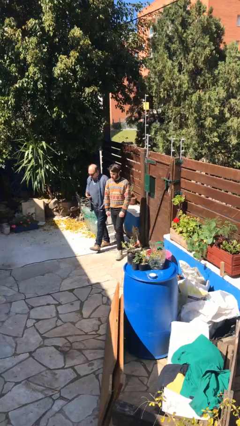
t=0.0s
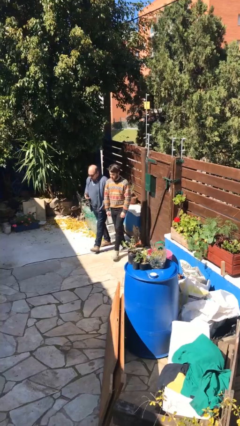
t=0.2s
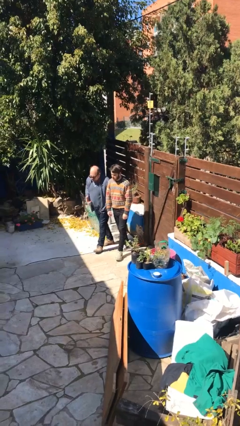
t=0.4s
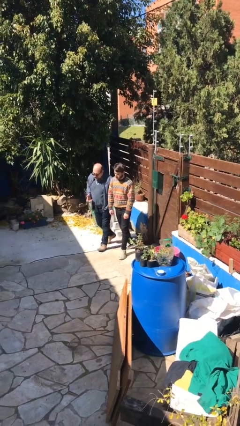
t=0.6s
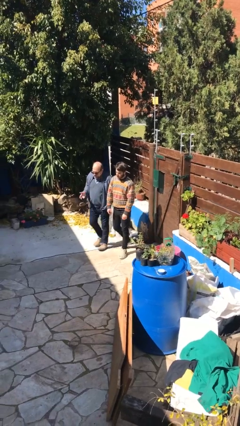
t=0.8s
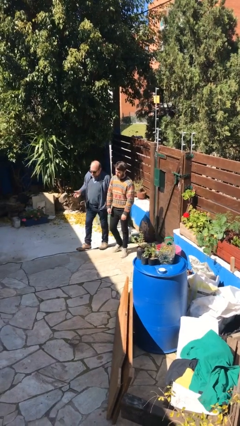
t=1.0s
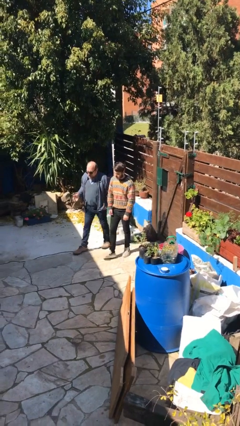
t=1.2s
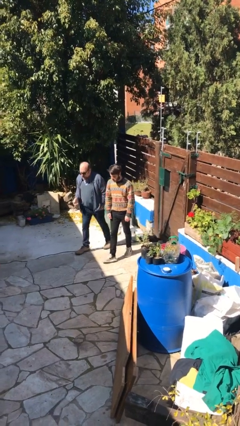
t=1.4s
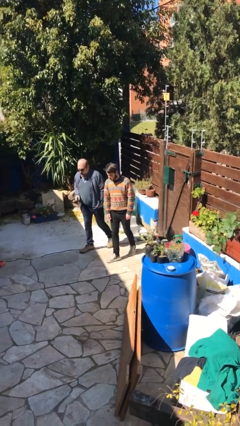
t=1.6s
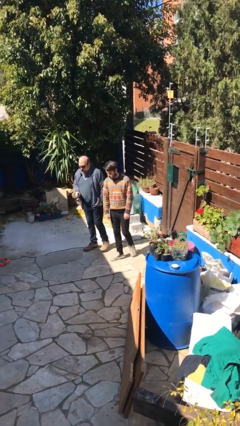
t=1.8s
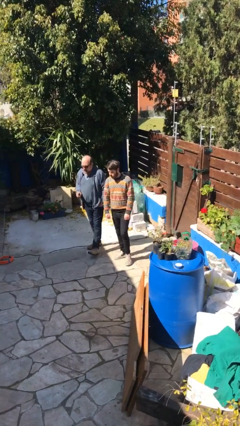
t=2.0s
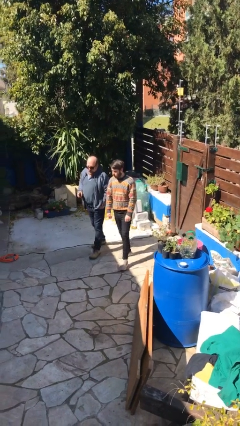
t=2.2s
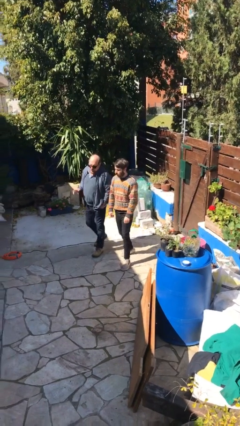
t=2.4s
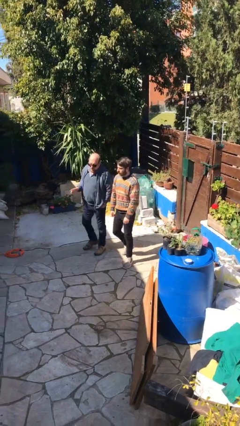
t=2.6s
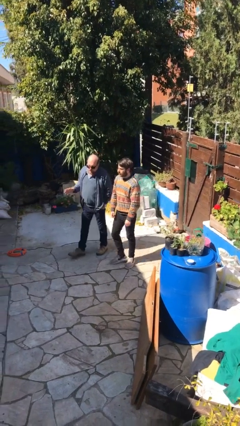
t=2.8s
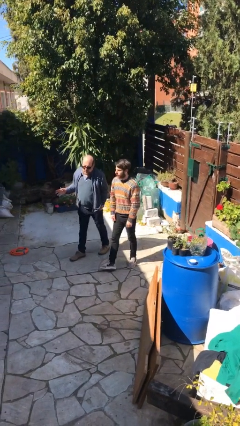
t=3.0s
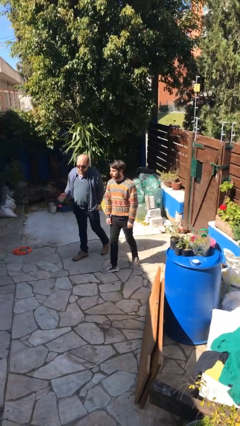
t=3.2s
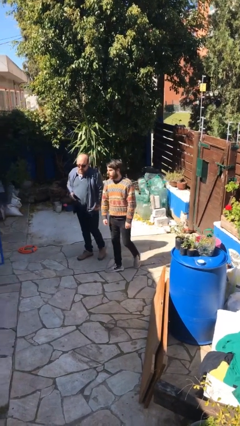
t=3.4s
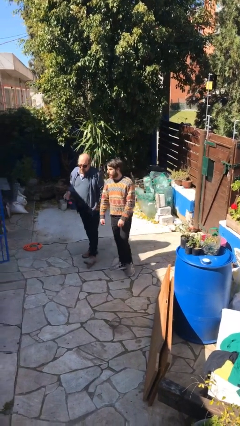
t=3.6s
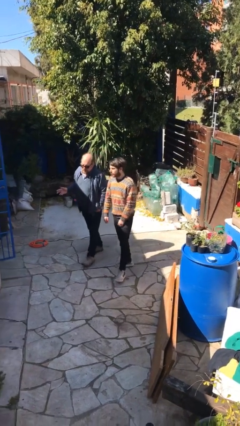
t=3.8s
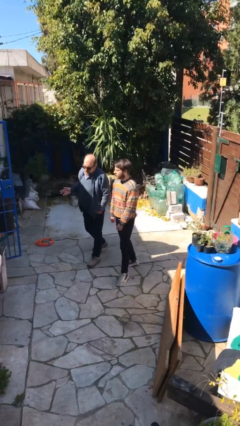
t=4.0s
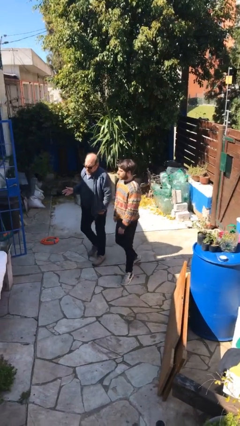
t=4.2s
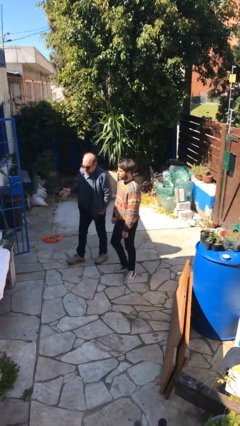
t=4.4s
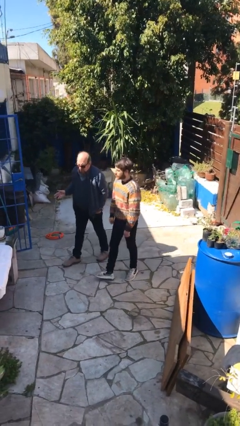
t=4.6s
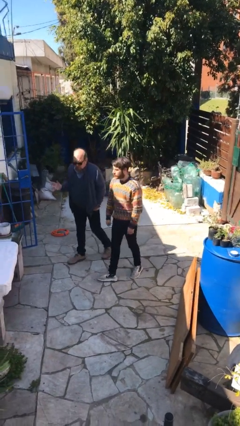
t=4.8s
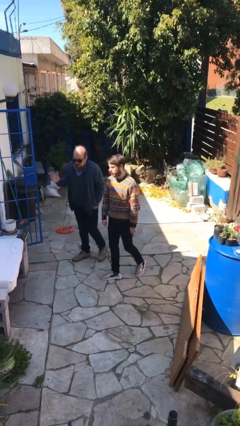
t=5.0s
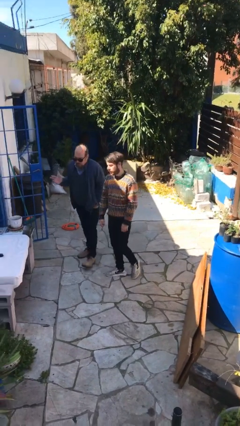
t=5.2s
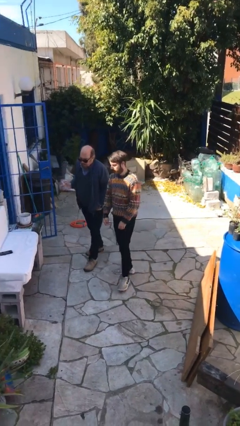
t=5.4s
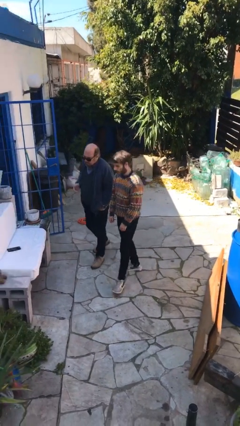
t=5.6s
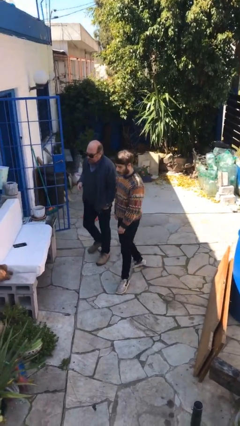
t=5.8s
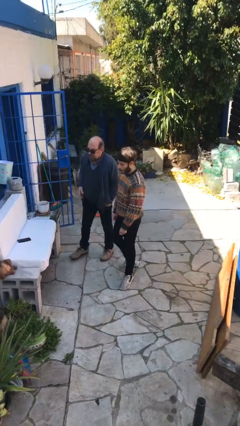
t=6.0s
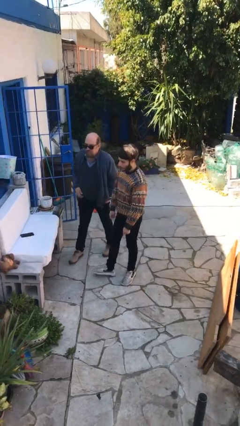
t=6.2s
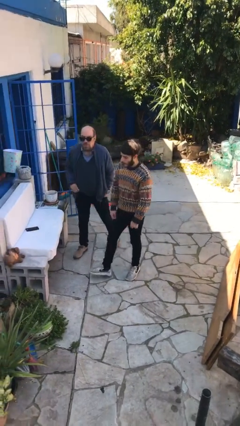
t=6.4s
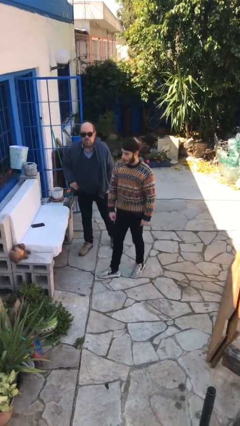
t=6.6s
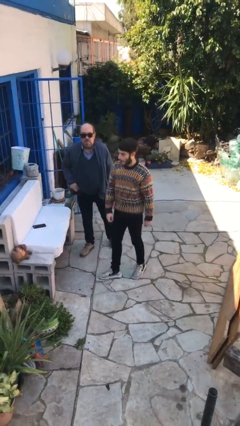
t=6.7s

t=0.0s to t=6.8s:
person talks to person

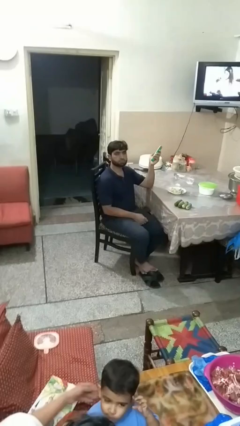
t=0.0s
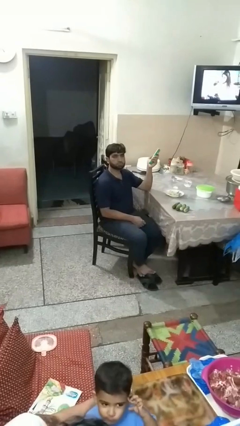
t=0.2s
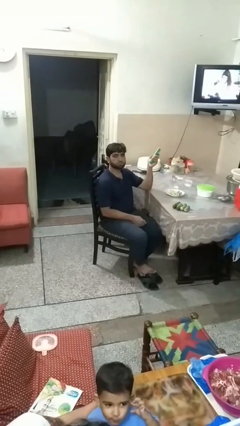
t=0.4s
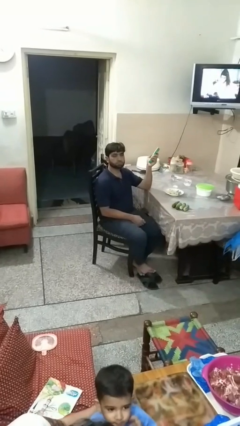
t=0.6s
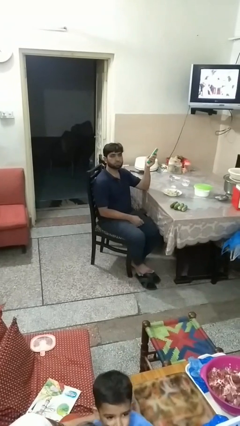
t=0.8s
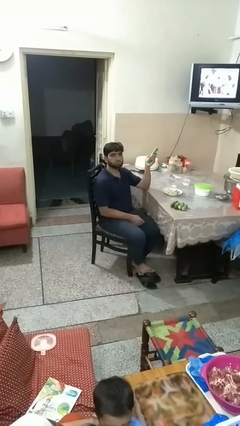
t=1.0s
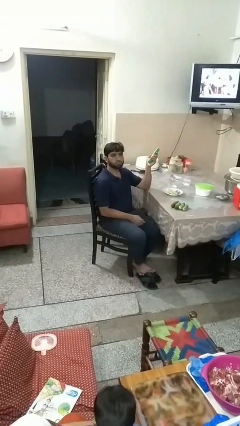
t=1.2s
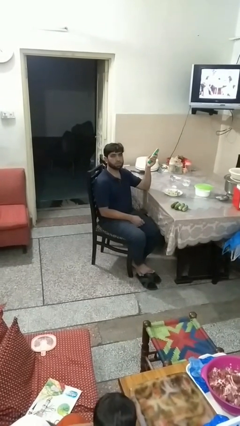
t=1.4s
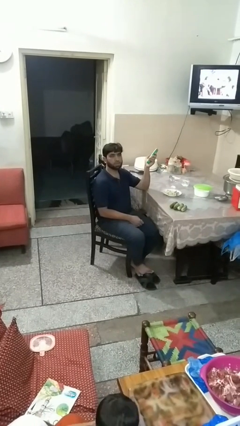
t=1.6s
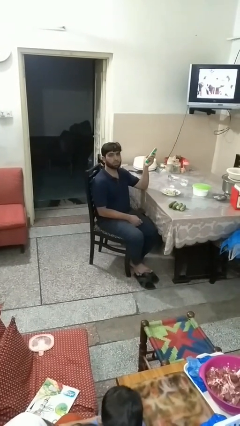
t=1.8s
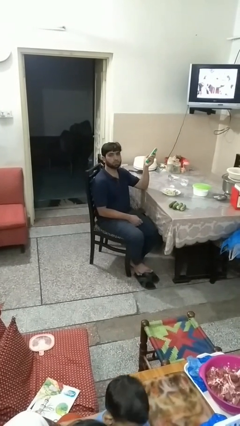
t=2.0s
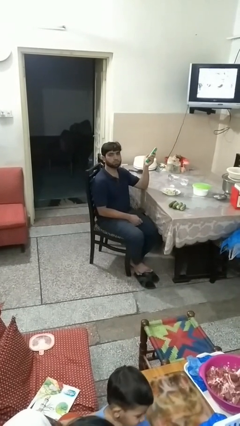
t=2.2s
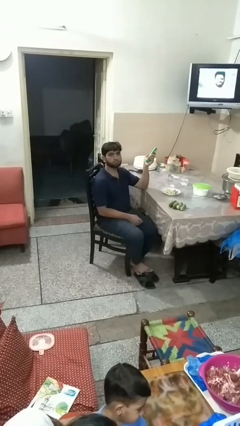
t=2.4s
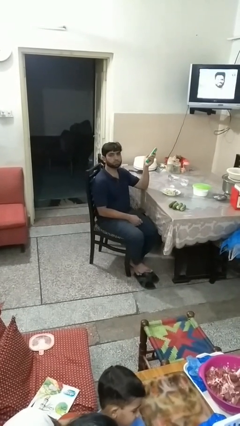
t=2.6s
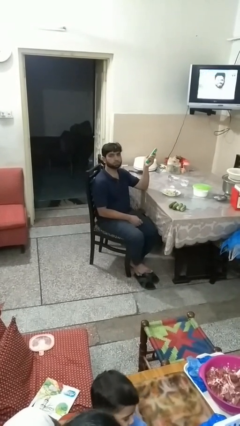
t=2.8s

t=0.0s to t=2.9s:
person uses television remote

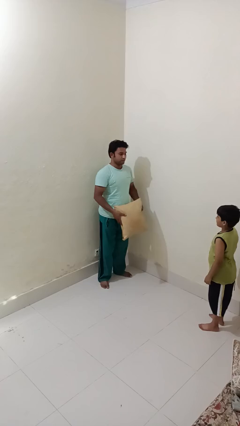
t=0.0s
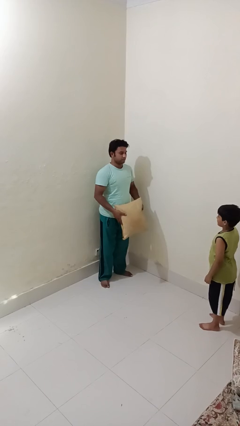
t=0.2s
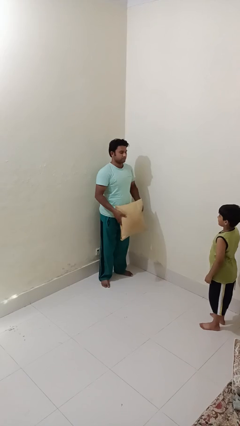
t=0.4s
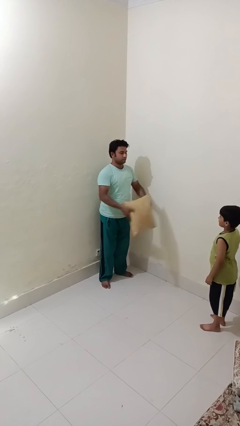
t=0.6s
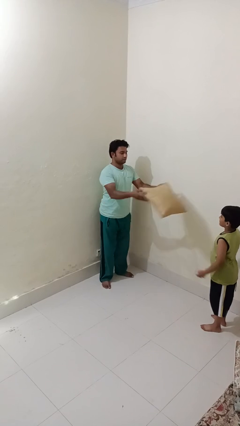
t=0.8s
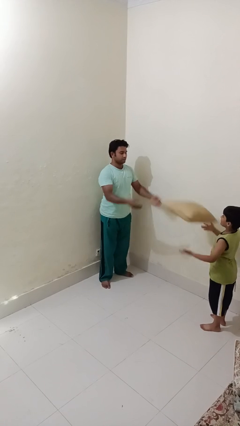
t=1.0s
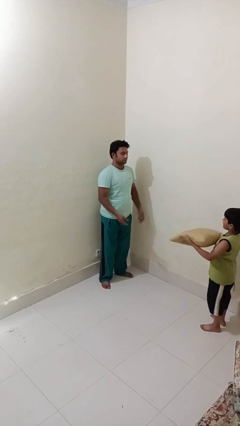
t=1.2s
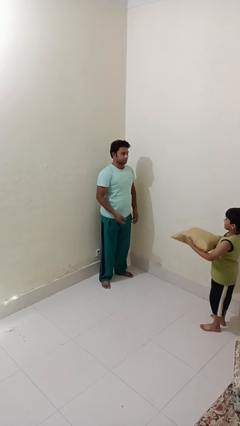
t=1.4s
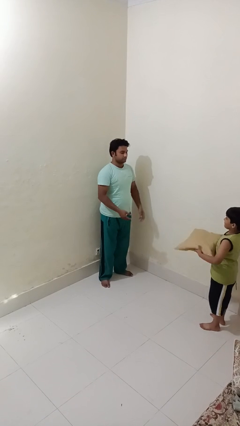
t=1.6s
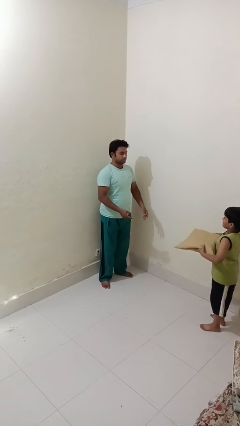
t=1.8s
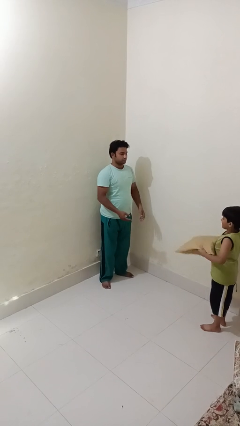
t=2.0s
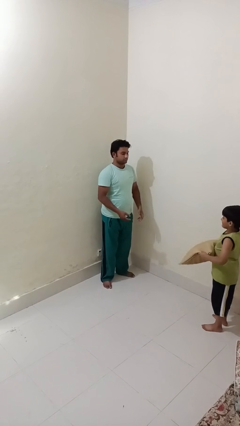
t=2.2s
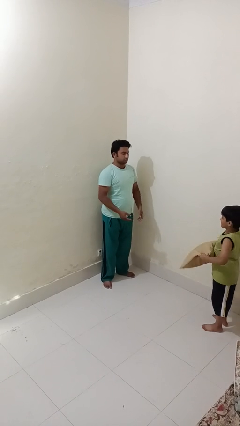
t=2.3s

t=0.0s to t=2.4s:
person throws object to person

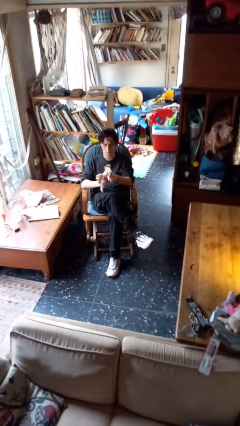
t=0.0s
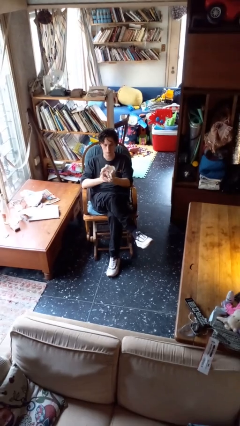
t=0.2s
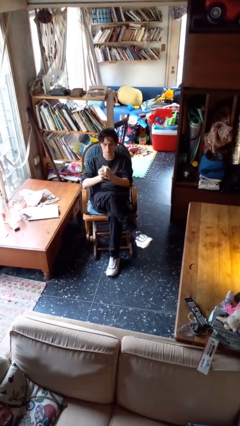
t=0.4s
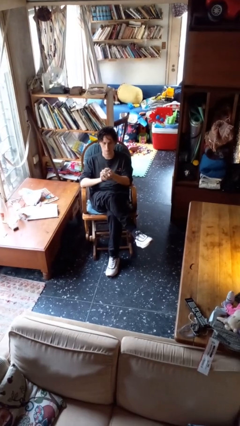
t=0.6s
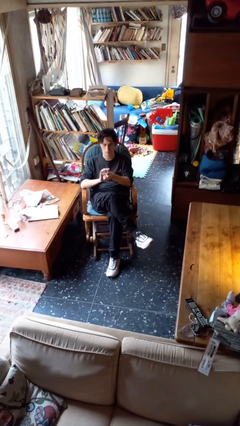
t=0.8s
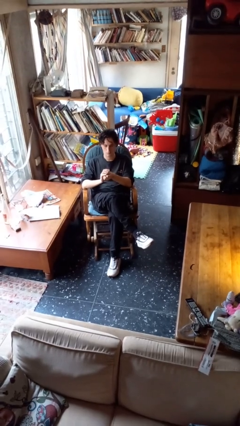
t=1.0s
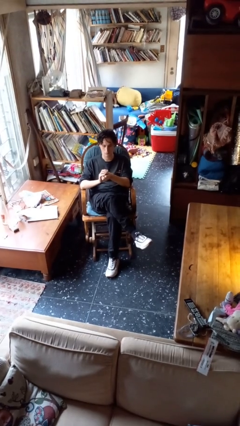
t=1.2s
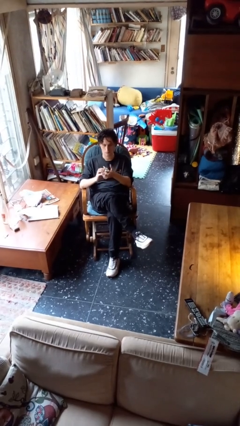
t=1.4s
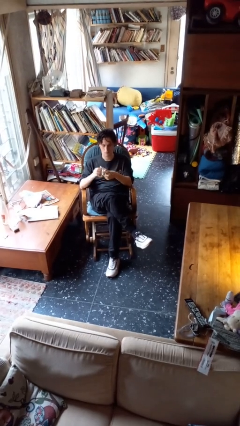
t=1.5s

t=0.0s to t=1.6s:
person crumples paper

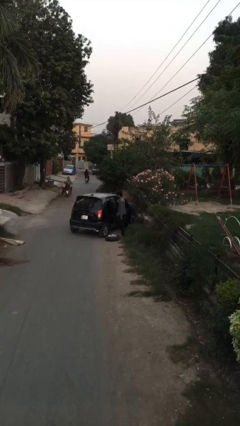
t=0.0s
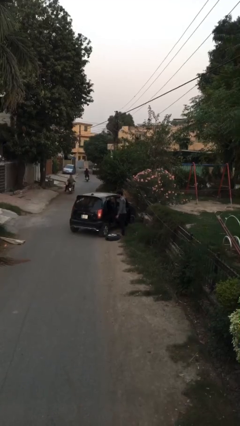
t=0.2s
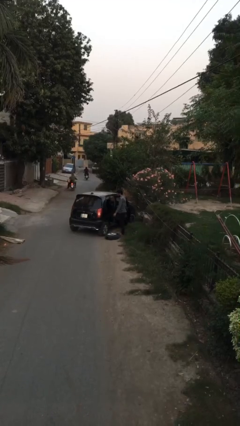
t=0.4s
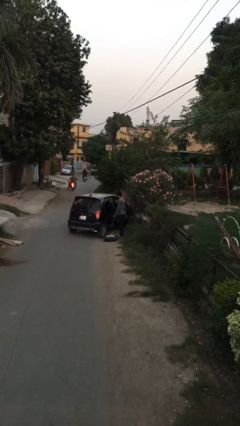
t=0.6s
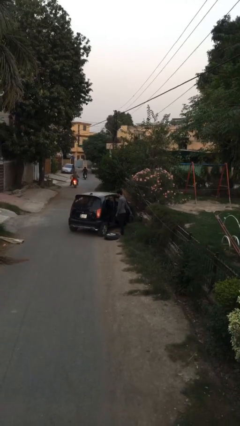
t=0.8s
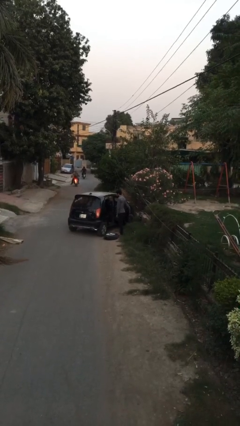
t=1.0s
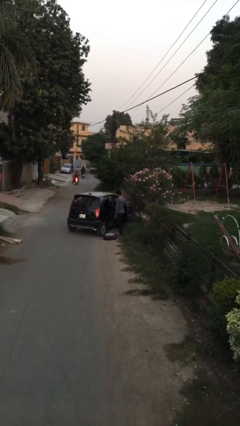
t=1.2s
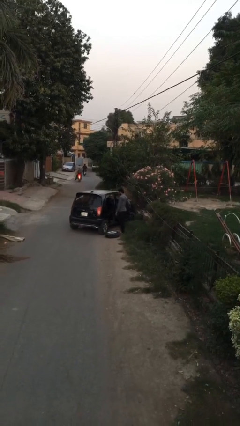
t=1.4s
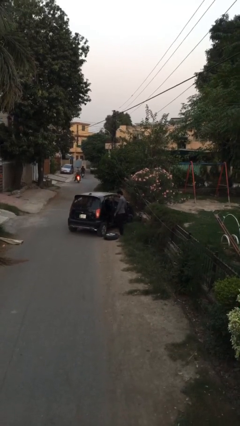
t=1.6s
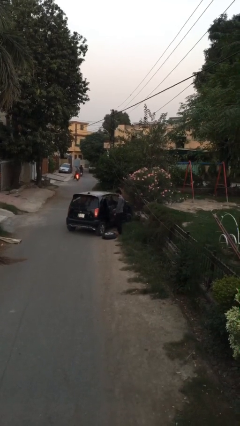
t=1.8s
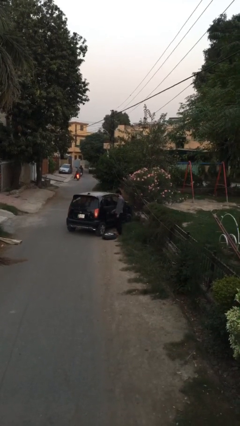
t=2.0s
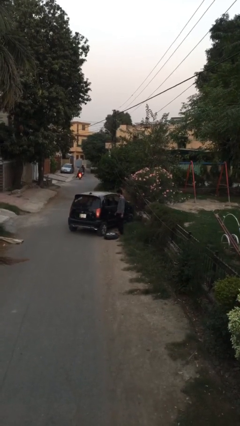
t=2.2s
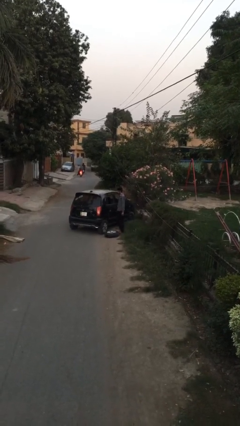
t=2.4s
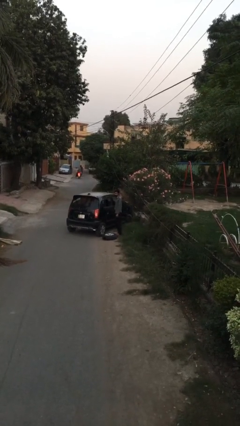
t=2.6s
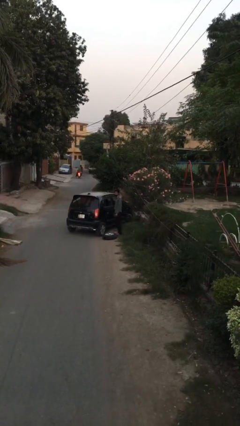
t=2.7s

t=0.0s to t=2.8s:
person closes car door

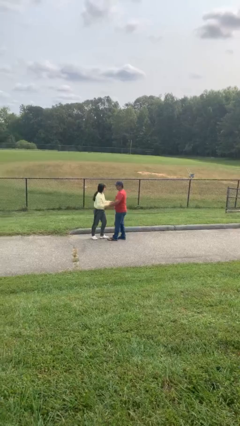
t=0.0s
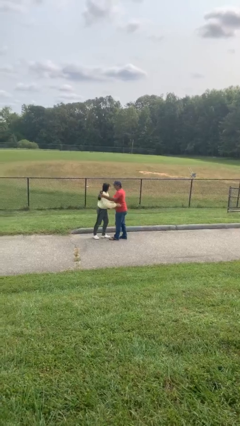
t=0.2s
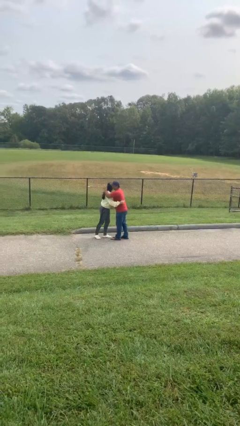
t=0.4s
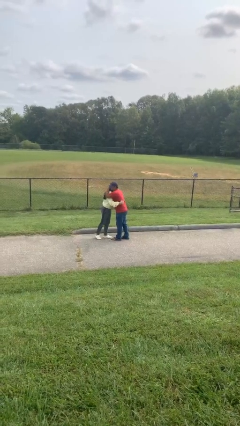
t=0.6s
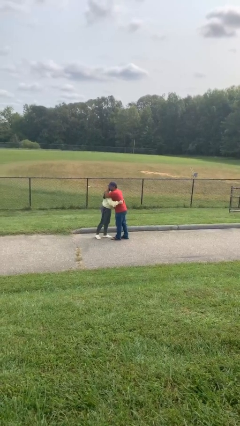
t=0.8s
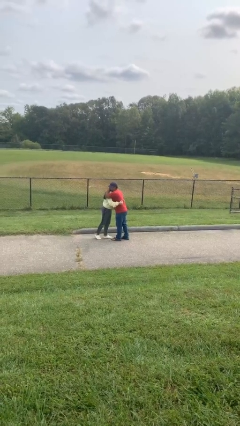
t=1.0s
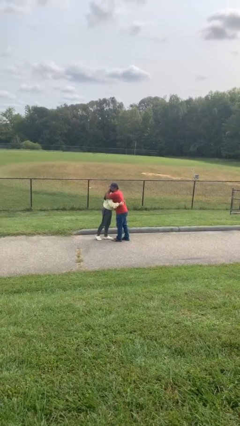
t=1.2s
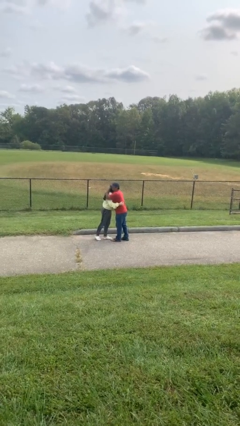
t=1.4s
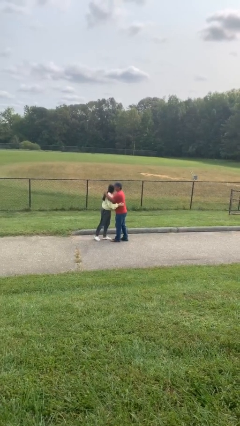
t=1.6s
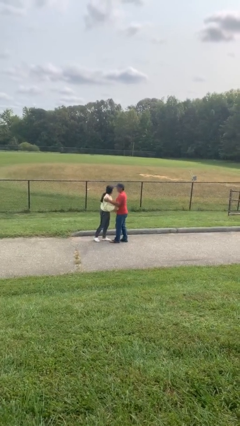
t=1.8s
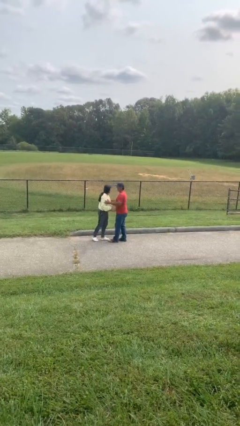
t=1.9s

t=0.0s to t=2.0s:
person embraces person
